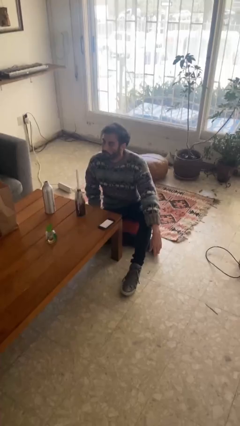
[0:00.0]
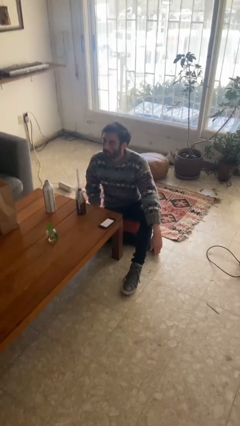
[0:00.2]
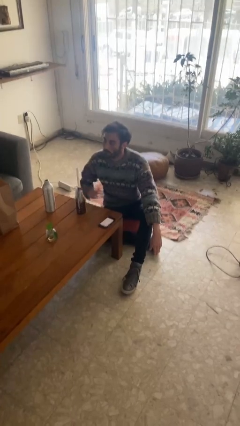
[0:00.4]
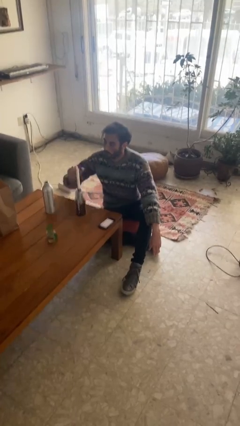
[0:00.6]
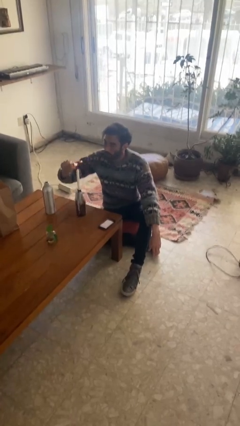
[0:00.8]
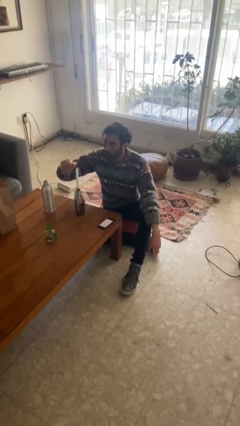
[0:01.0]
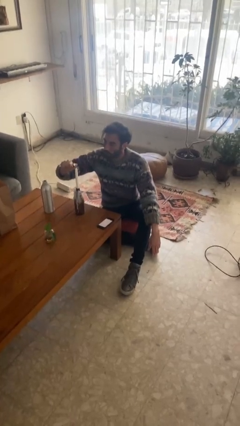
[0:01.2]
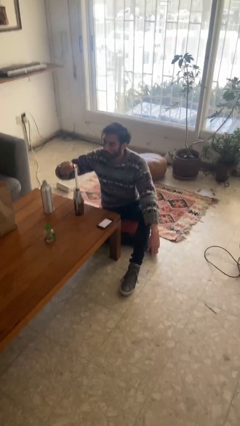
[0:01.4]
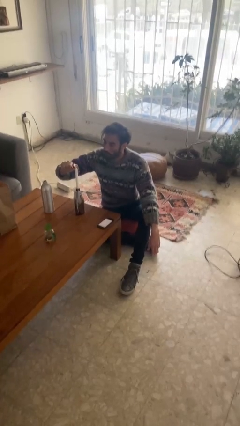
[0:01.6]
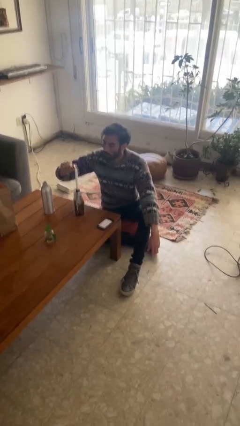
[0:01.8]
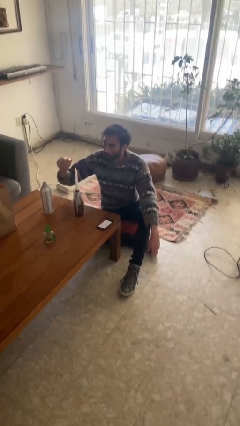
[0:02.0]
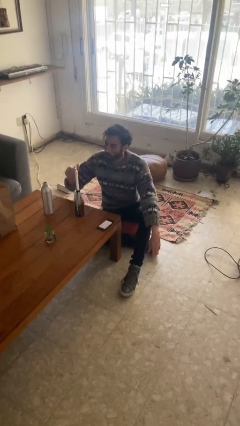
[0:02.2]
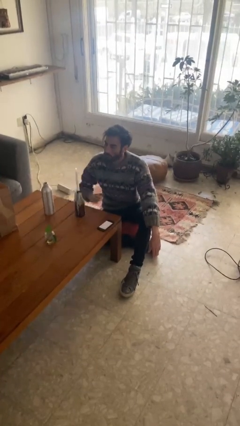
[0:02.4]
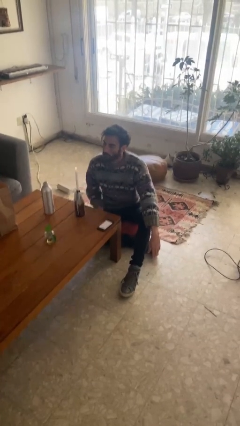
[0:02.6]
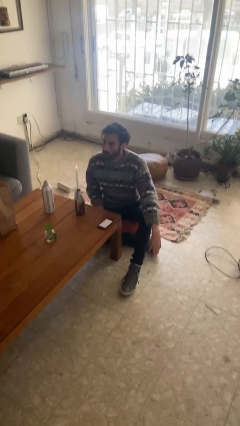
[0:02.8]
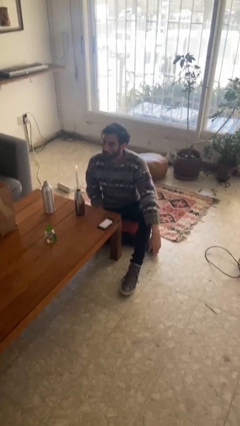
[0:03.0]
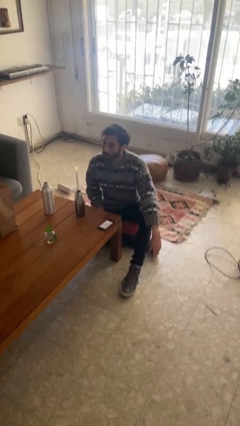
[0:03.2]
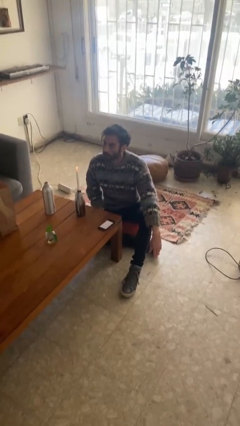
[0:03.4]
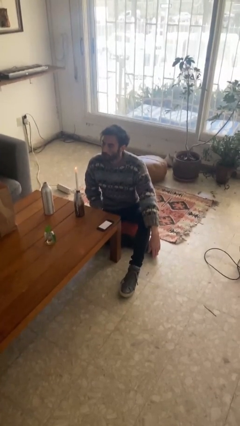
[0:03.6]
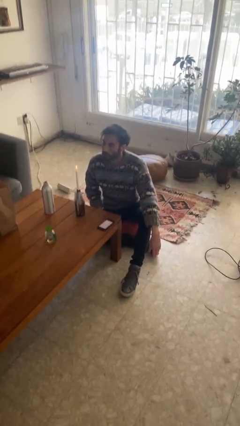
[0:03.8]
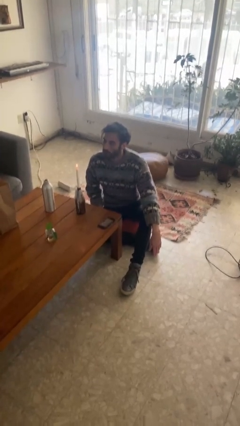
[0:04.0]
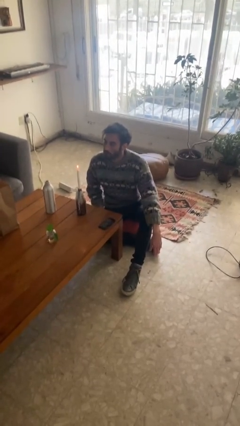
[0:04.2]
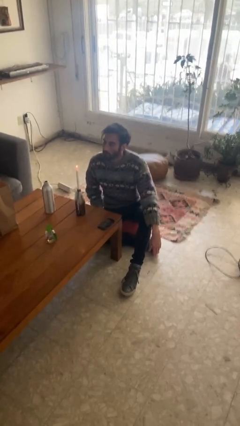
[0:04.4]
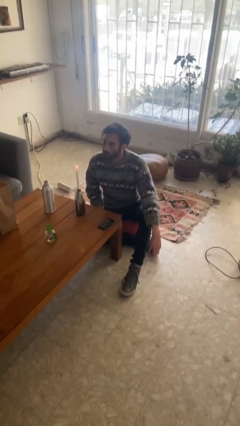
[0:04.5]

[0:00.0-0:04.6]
person lights candle

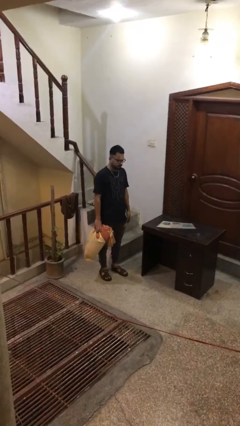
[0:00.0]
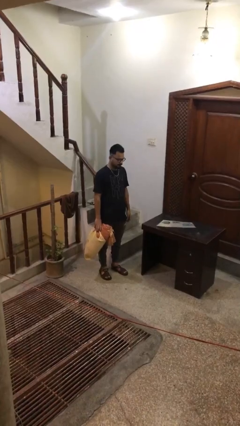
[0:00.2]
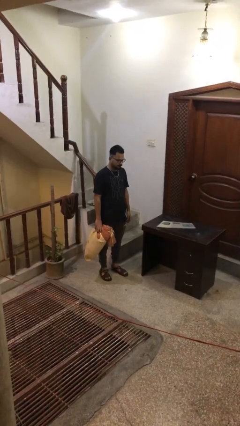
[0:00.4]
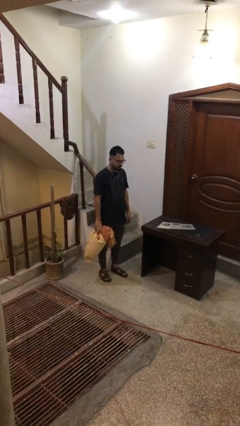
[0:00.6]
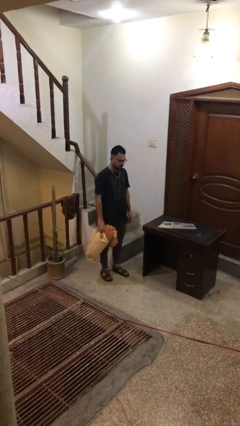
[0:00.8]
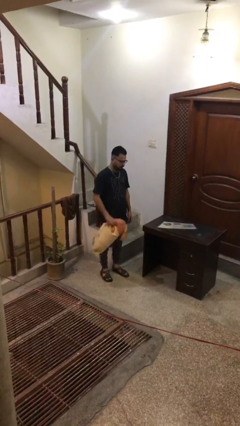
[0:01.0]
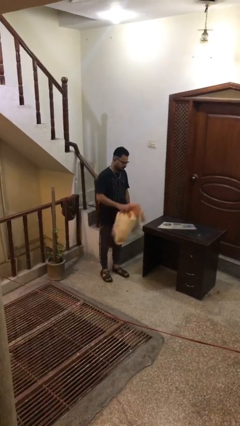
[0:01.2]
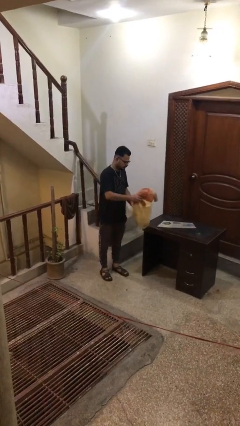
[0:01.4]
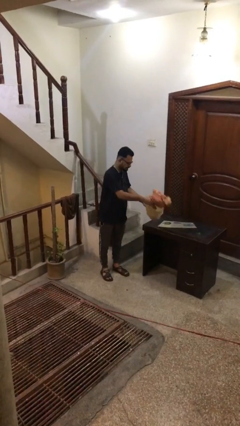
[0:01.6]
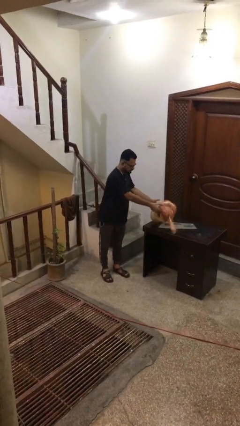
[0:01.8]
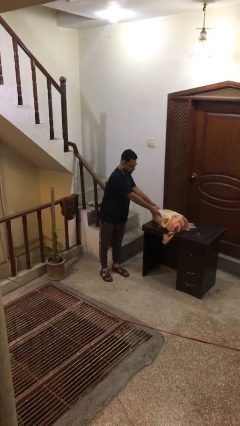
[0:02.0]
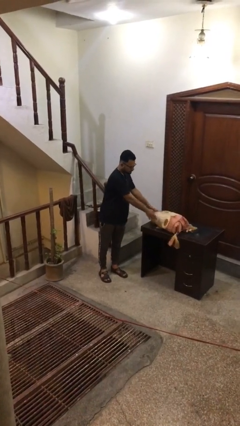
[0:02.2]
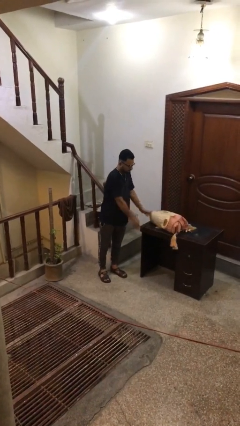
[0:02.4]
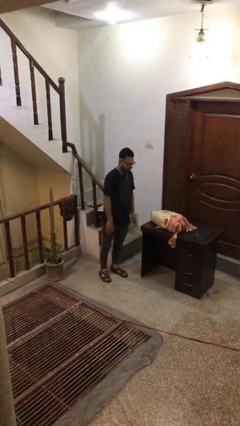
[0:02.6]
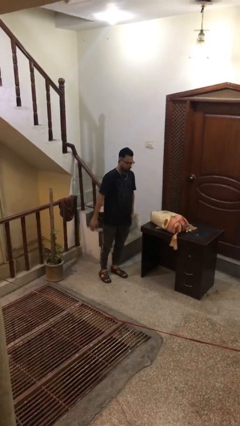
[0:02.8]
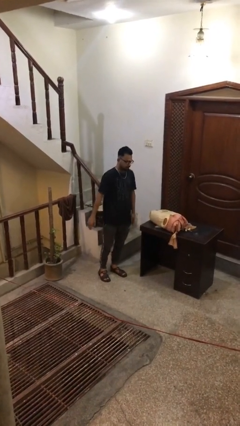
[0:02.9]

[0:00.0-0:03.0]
person puts down object on table

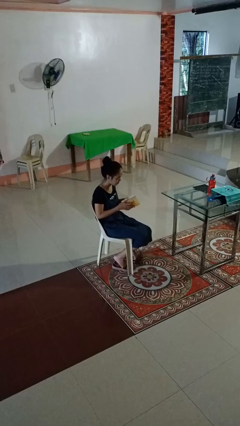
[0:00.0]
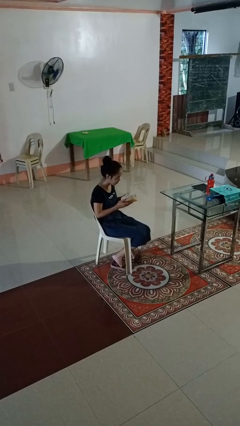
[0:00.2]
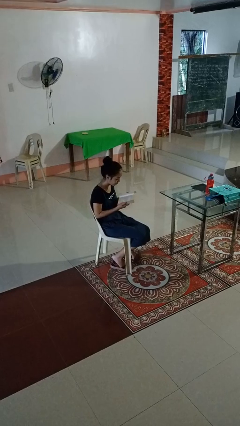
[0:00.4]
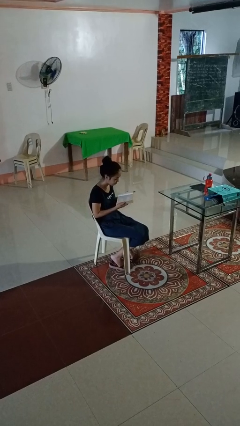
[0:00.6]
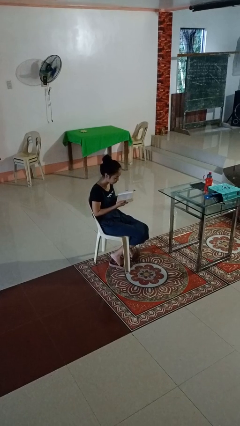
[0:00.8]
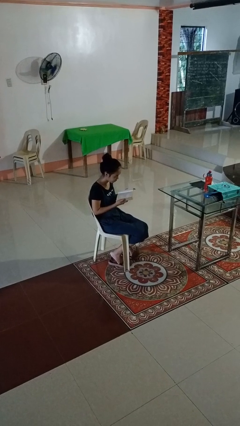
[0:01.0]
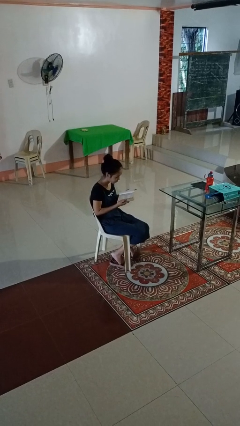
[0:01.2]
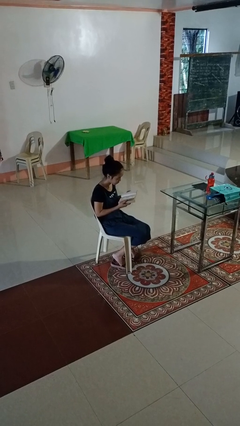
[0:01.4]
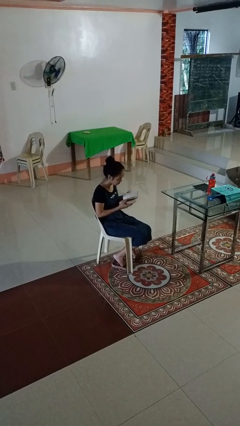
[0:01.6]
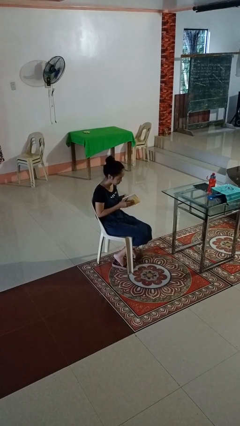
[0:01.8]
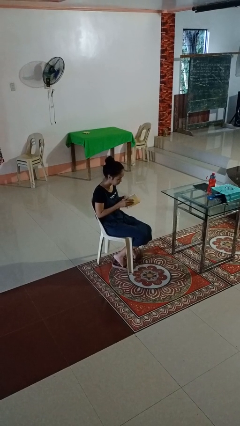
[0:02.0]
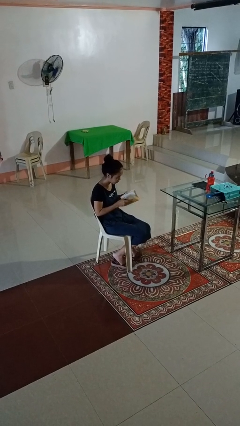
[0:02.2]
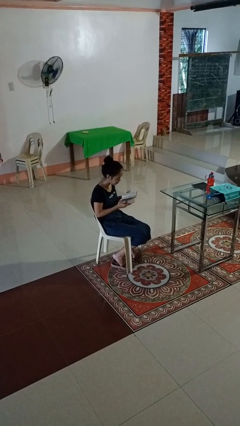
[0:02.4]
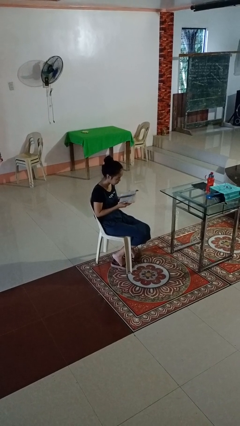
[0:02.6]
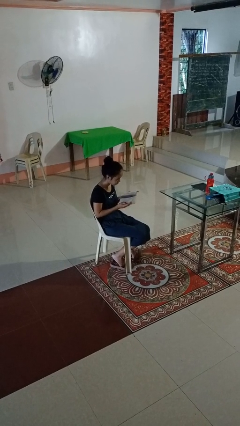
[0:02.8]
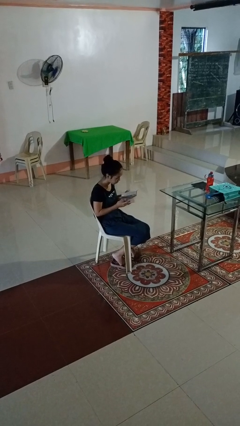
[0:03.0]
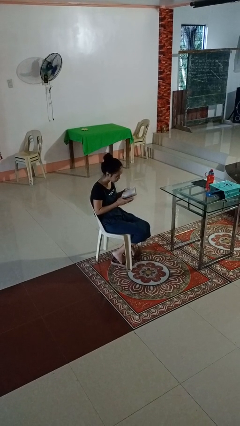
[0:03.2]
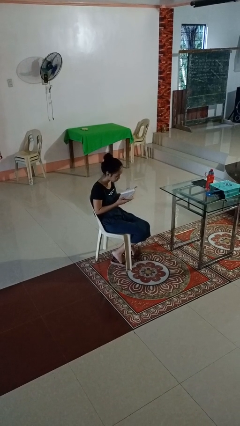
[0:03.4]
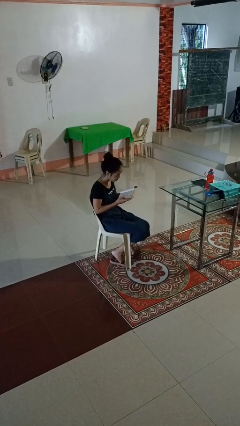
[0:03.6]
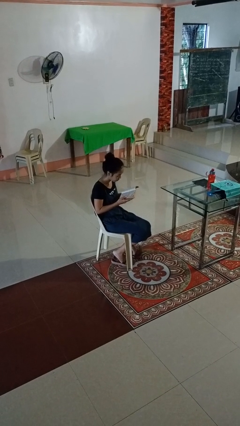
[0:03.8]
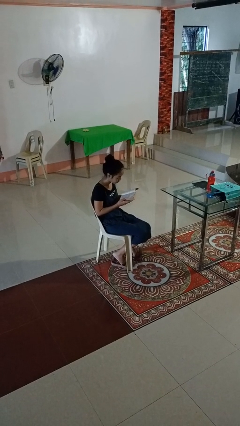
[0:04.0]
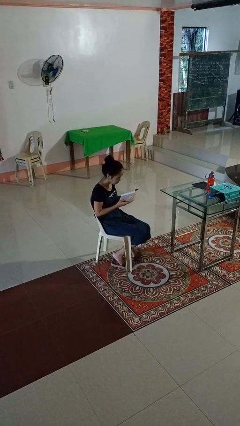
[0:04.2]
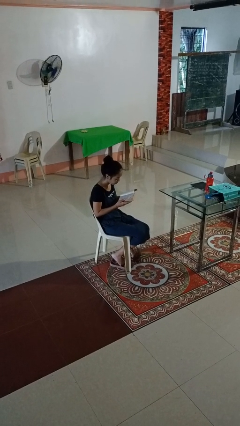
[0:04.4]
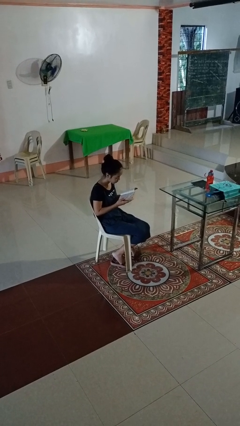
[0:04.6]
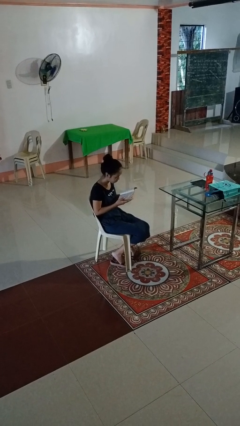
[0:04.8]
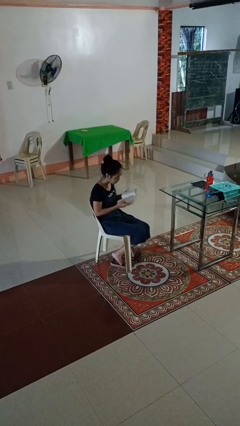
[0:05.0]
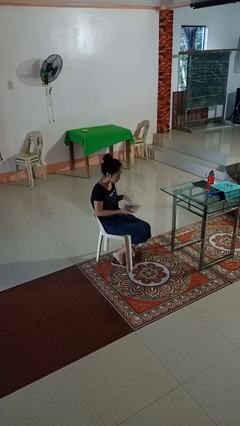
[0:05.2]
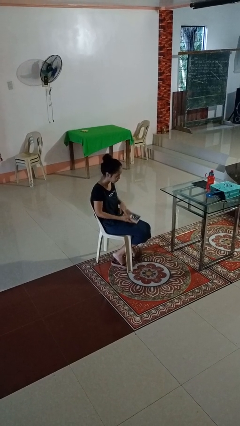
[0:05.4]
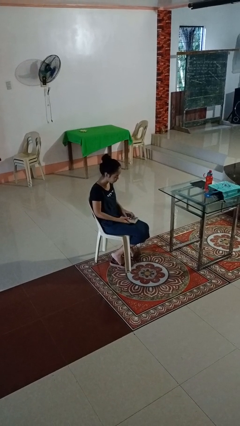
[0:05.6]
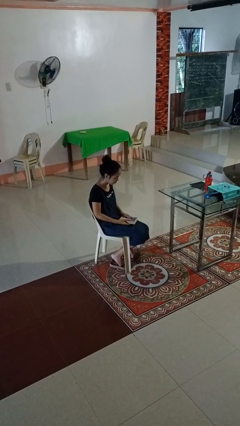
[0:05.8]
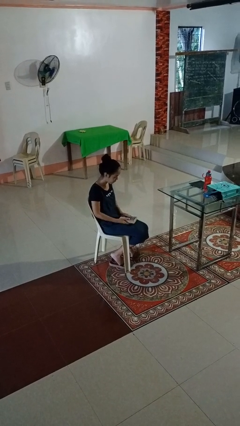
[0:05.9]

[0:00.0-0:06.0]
person reads book

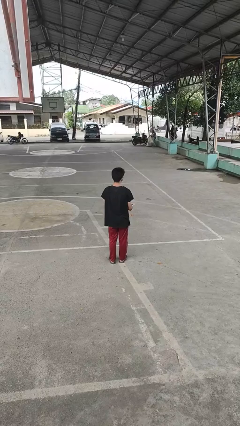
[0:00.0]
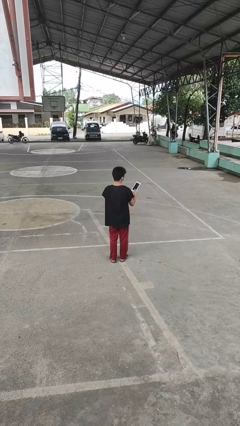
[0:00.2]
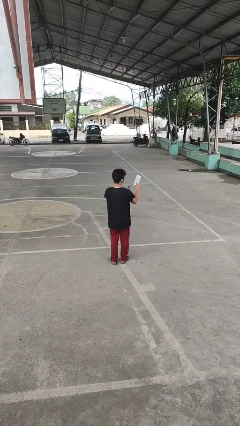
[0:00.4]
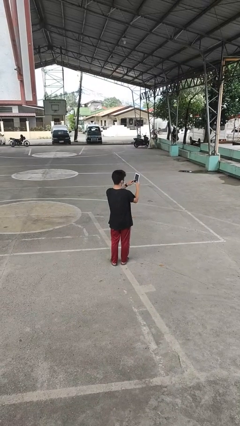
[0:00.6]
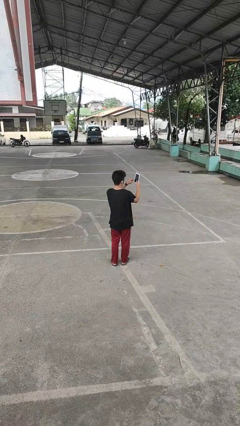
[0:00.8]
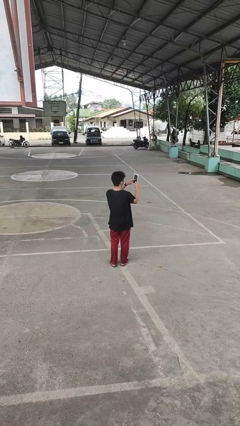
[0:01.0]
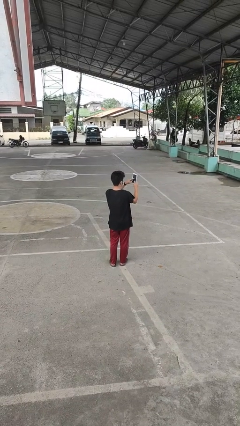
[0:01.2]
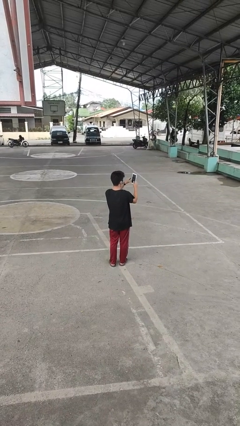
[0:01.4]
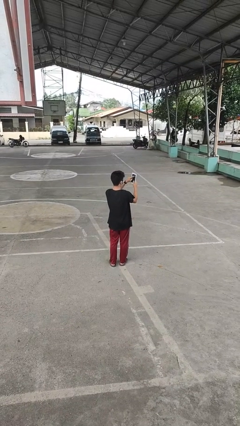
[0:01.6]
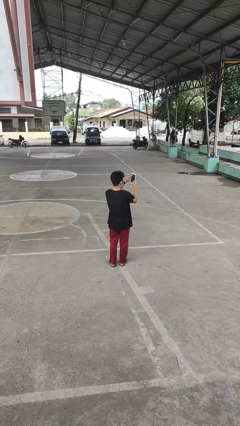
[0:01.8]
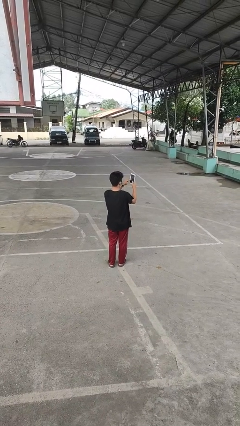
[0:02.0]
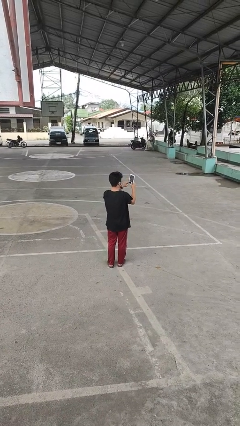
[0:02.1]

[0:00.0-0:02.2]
person interacts with tablet

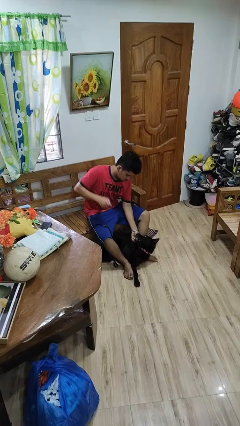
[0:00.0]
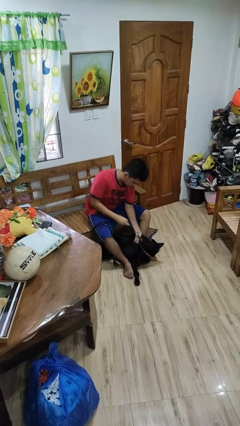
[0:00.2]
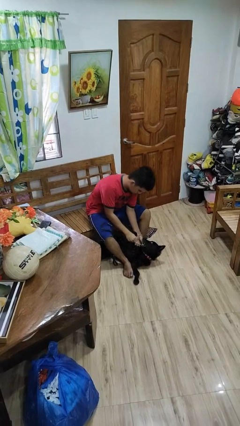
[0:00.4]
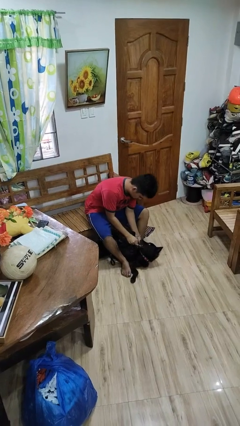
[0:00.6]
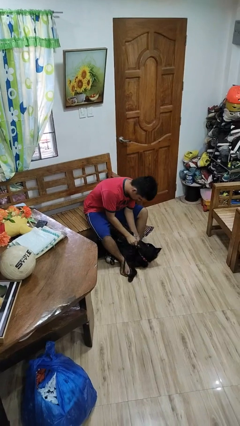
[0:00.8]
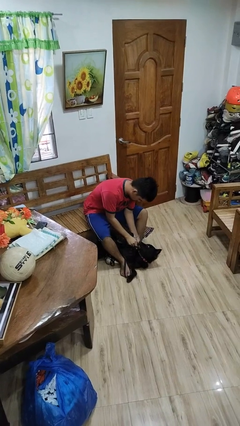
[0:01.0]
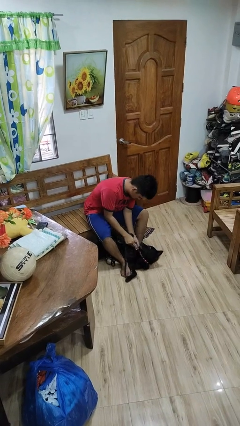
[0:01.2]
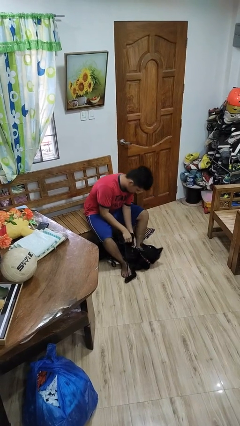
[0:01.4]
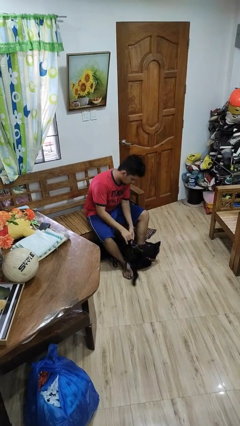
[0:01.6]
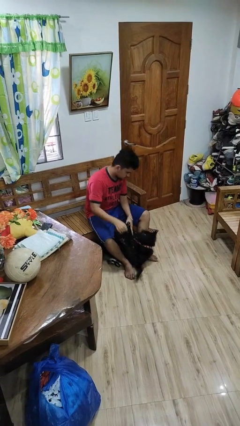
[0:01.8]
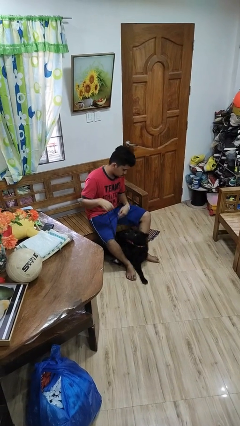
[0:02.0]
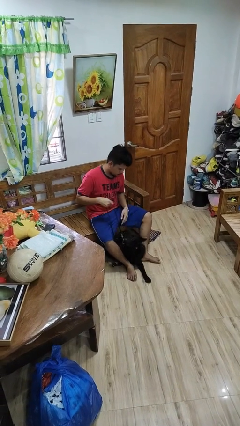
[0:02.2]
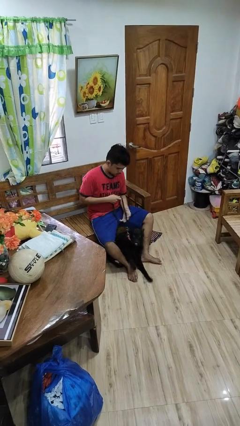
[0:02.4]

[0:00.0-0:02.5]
person attaches leash to dog
